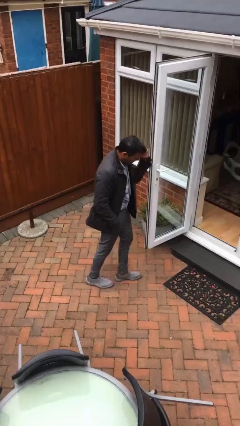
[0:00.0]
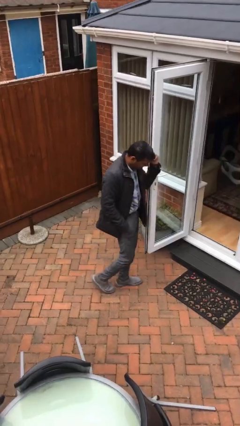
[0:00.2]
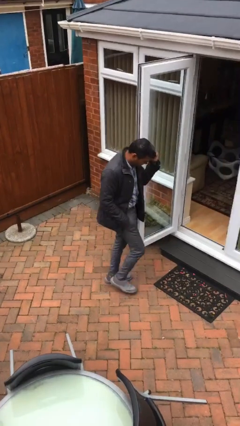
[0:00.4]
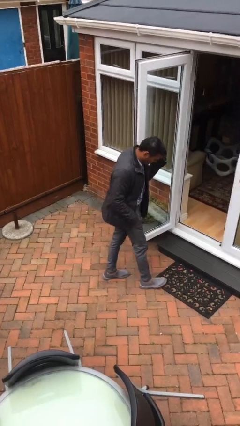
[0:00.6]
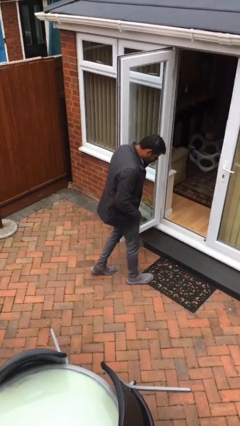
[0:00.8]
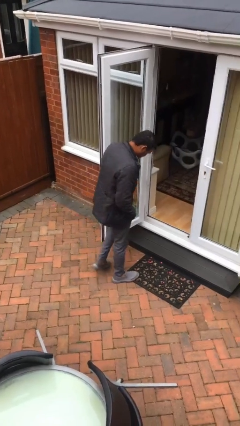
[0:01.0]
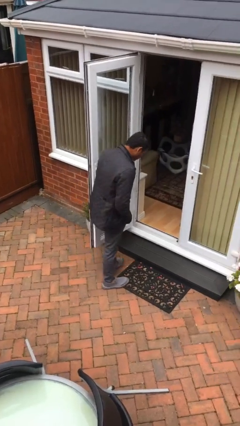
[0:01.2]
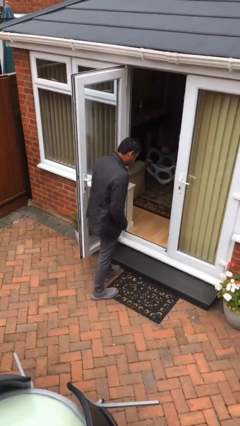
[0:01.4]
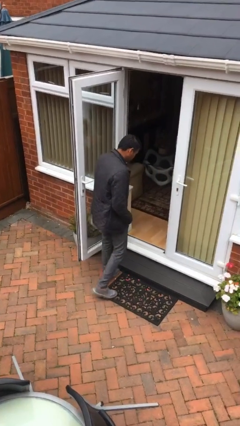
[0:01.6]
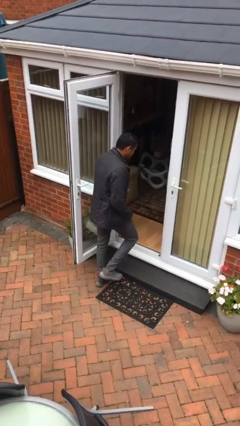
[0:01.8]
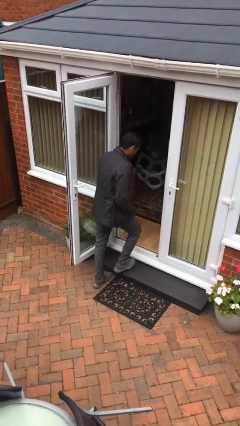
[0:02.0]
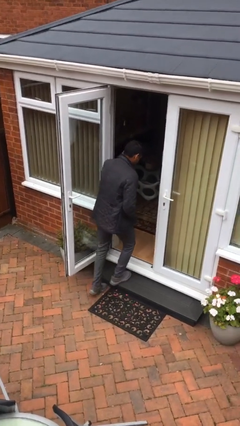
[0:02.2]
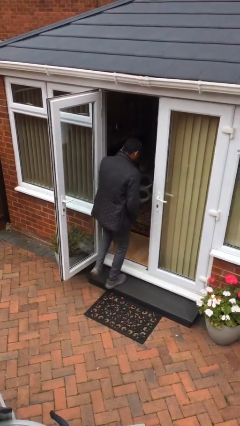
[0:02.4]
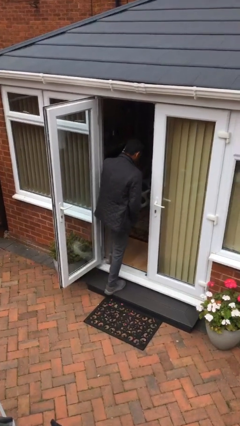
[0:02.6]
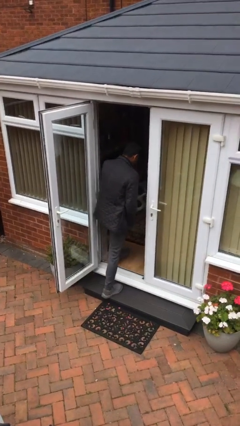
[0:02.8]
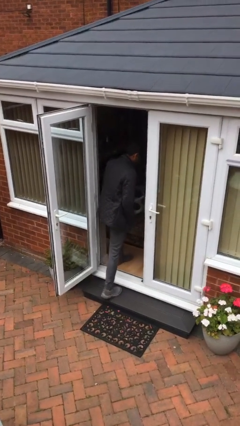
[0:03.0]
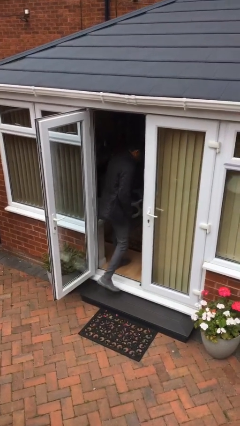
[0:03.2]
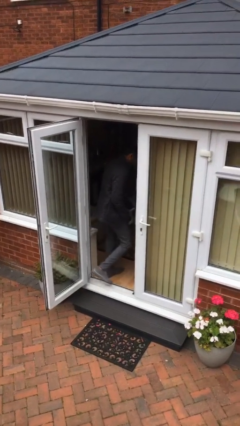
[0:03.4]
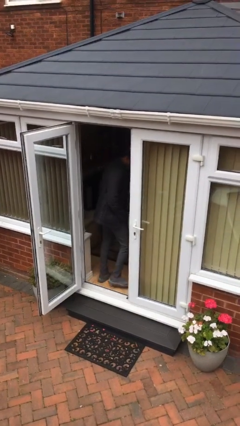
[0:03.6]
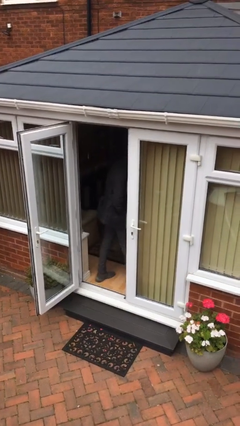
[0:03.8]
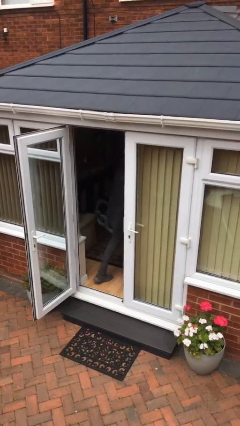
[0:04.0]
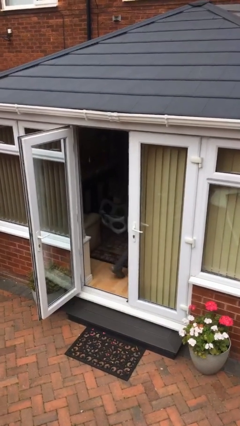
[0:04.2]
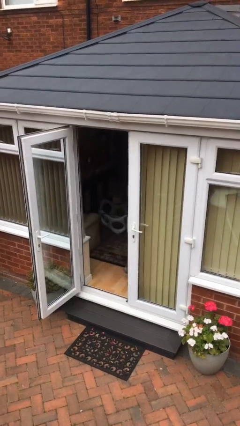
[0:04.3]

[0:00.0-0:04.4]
person exits scene through structure

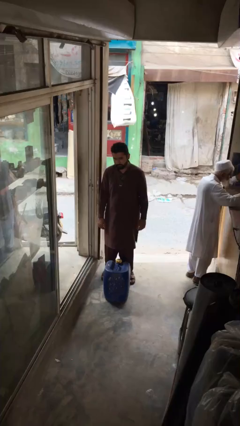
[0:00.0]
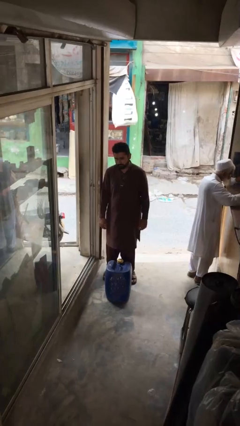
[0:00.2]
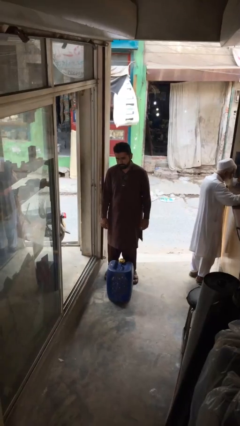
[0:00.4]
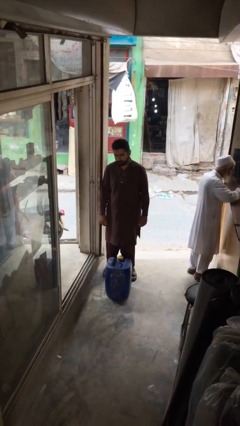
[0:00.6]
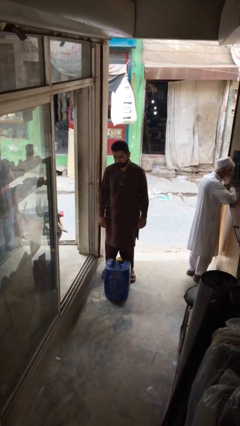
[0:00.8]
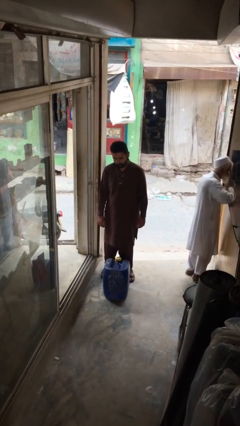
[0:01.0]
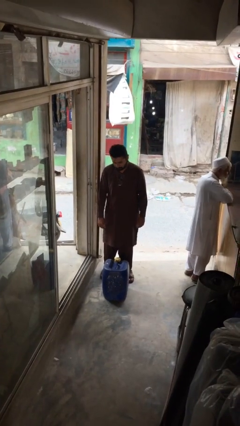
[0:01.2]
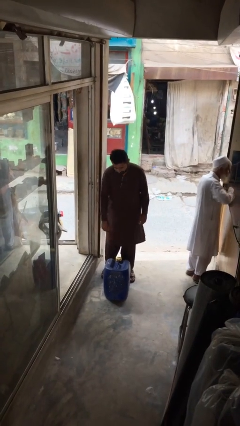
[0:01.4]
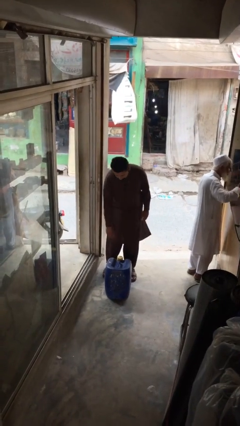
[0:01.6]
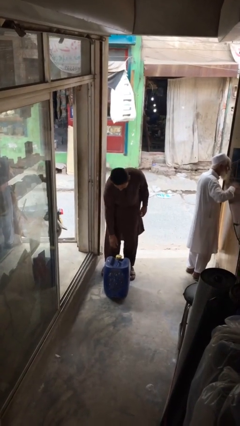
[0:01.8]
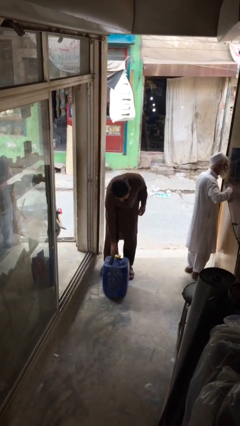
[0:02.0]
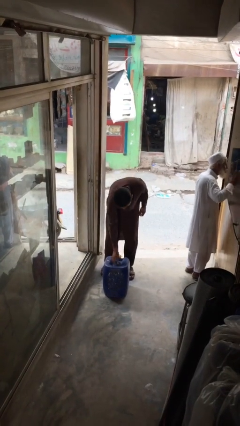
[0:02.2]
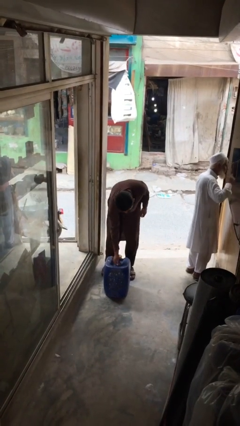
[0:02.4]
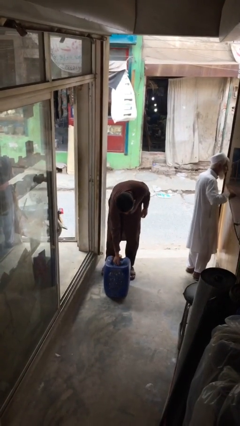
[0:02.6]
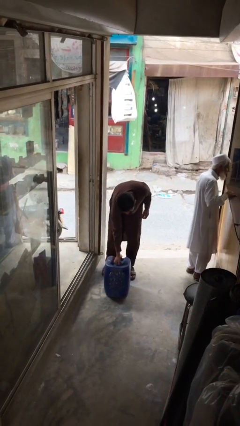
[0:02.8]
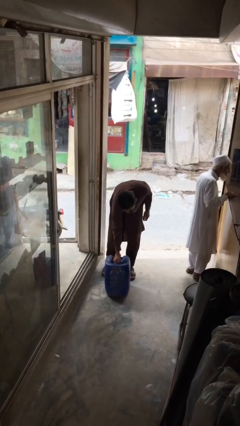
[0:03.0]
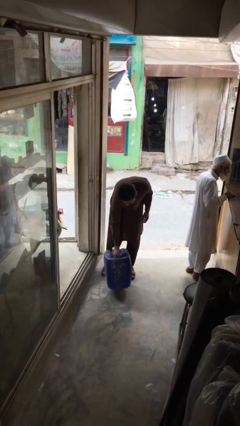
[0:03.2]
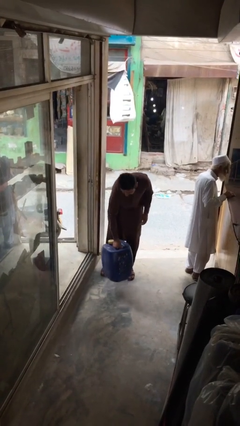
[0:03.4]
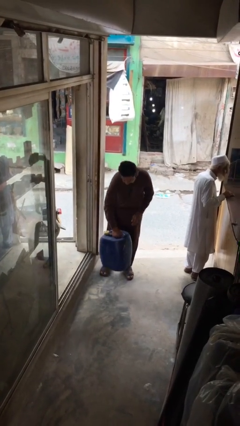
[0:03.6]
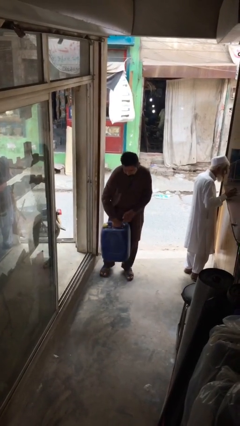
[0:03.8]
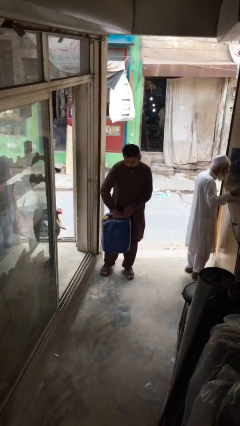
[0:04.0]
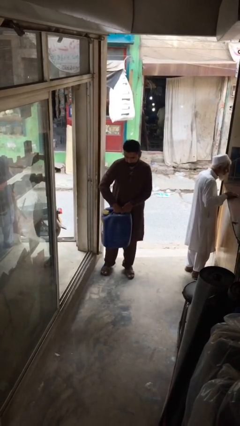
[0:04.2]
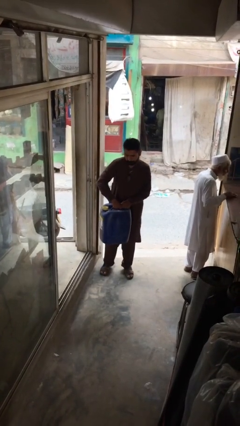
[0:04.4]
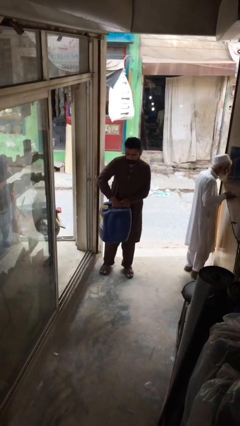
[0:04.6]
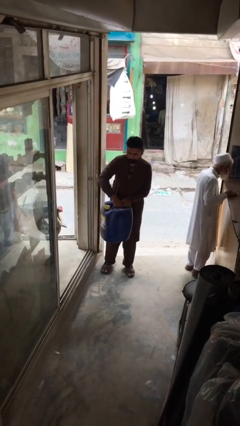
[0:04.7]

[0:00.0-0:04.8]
person picks up object from floor

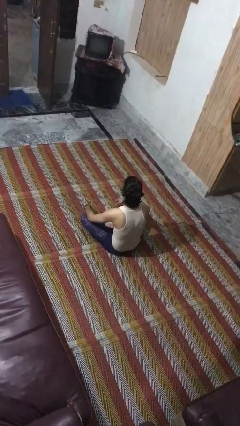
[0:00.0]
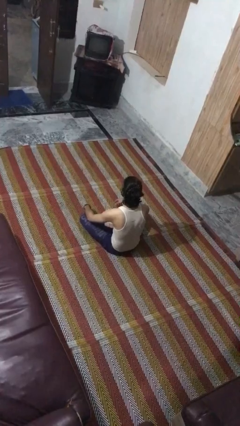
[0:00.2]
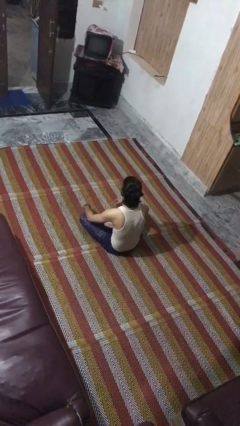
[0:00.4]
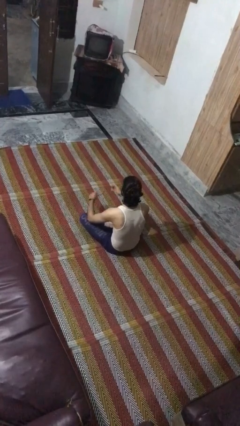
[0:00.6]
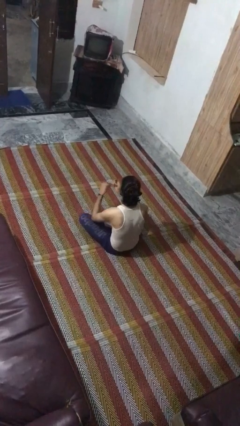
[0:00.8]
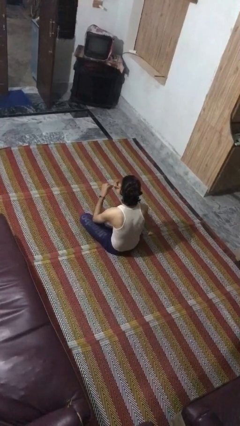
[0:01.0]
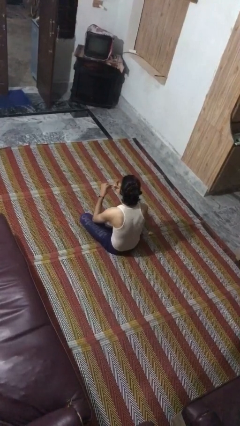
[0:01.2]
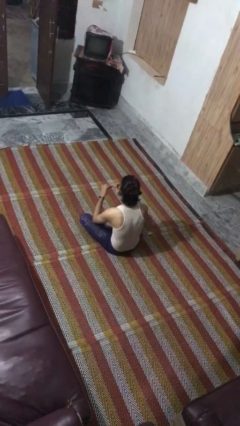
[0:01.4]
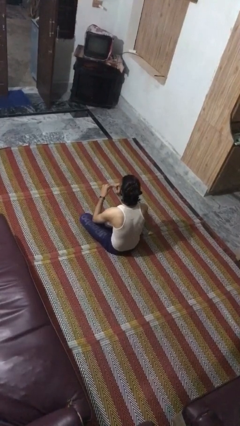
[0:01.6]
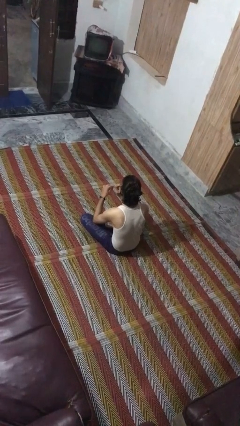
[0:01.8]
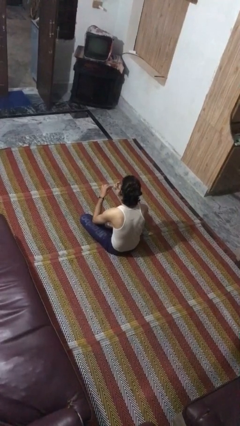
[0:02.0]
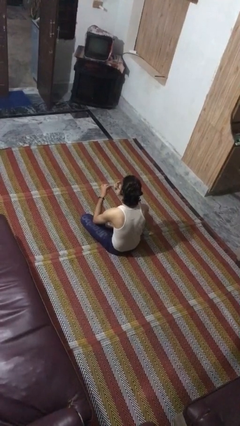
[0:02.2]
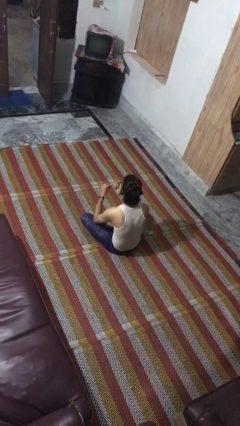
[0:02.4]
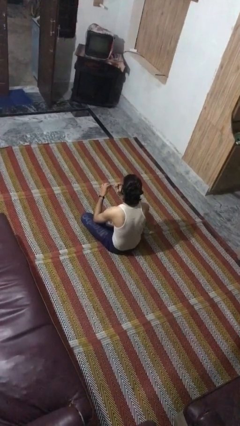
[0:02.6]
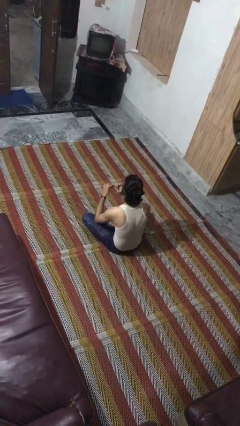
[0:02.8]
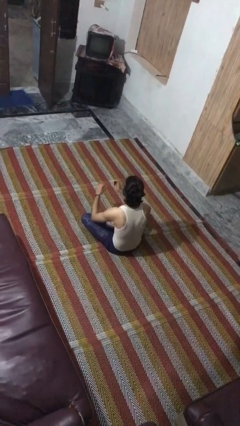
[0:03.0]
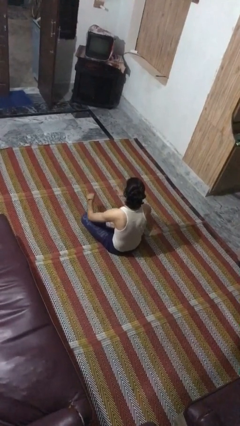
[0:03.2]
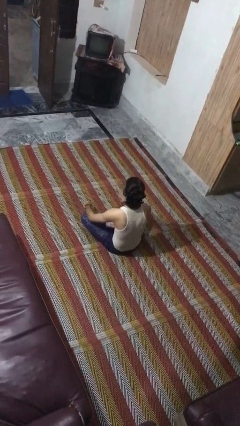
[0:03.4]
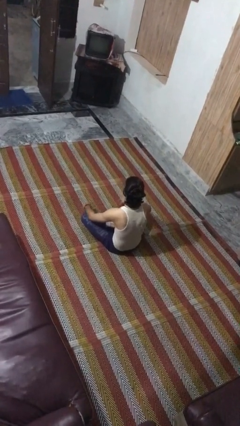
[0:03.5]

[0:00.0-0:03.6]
person files fingernails

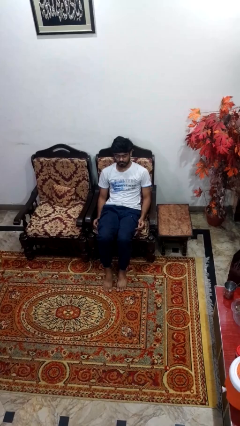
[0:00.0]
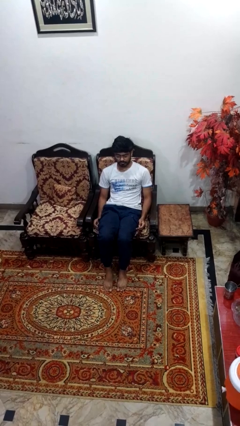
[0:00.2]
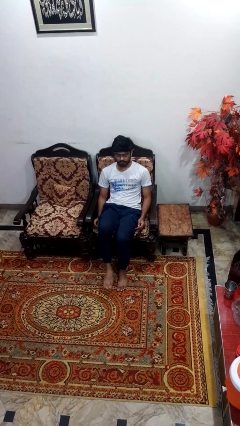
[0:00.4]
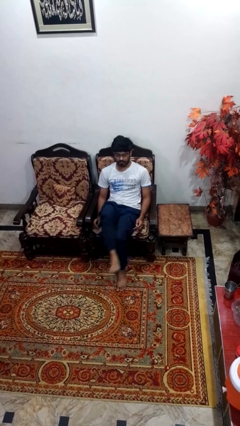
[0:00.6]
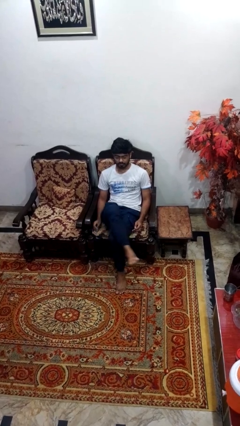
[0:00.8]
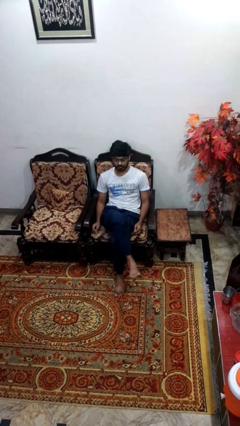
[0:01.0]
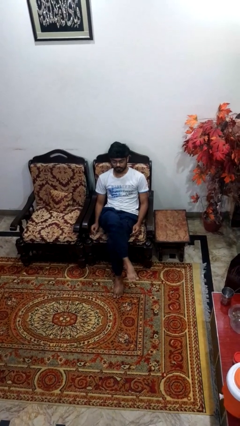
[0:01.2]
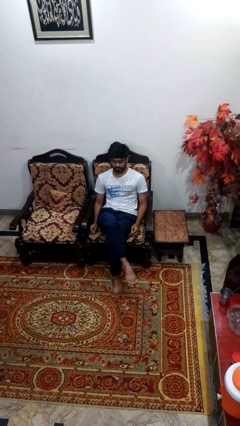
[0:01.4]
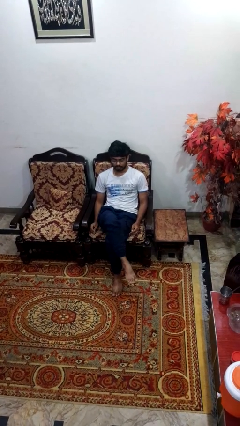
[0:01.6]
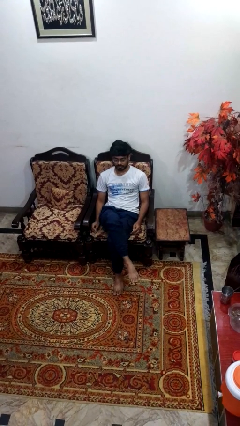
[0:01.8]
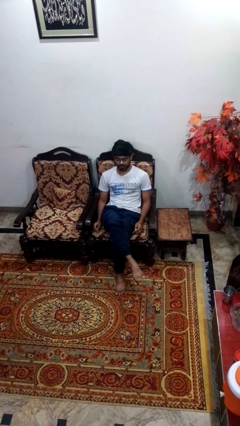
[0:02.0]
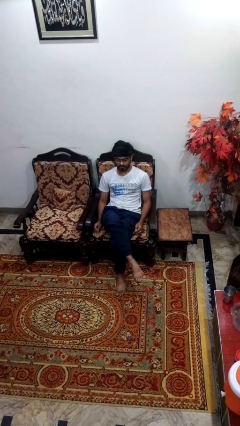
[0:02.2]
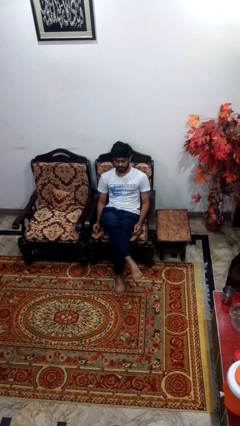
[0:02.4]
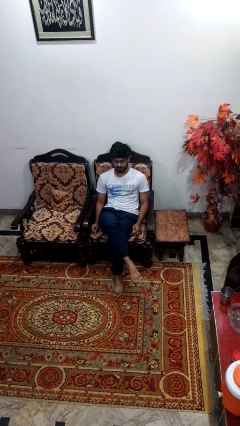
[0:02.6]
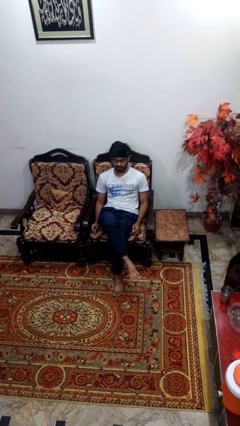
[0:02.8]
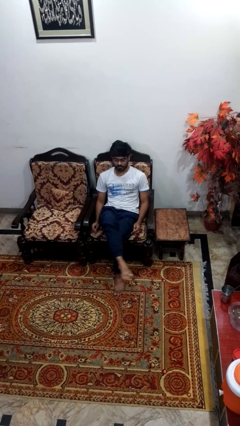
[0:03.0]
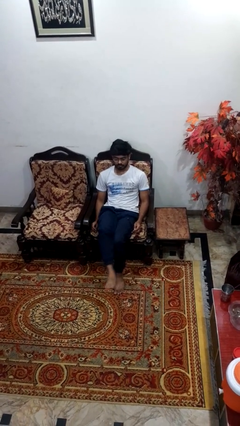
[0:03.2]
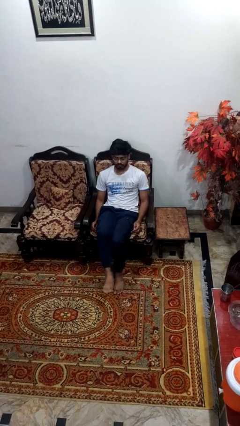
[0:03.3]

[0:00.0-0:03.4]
person crosses legs

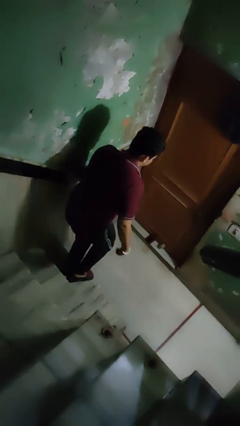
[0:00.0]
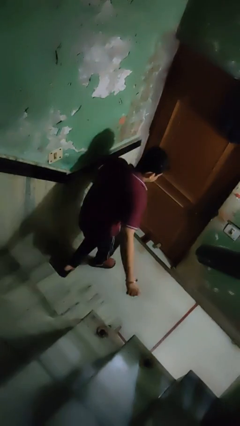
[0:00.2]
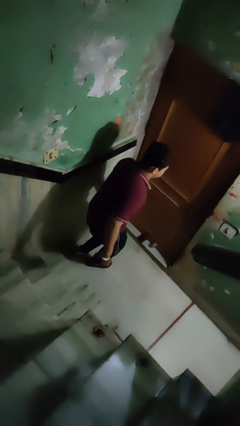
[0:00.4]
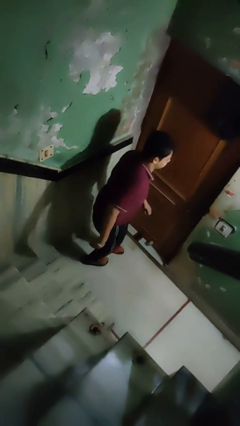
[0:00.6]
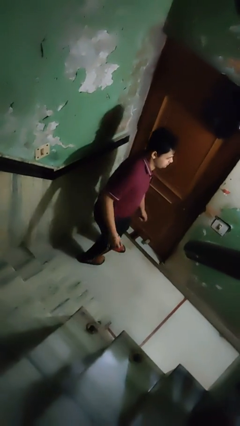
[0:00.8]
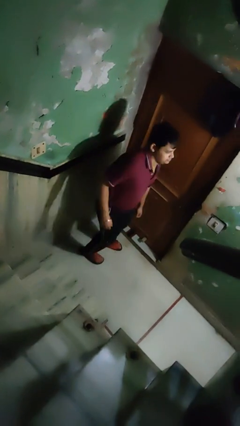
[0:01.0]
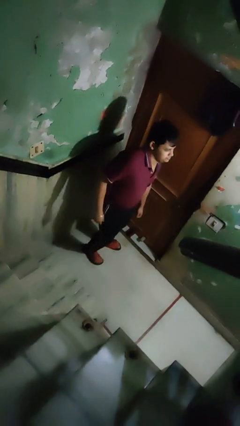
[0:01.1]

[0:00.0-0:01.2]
person trips on stair

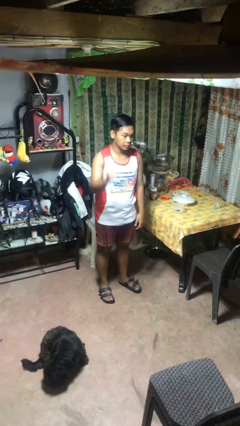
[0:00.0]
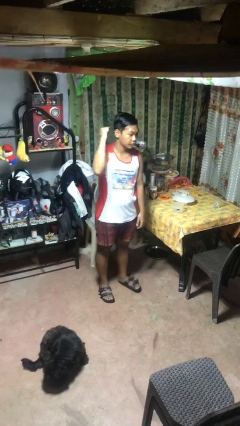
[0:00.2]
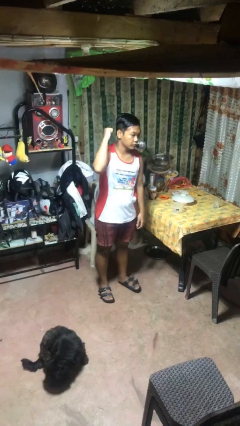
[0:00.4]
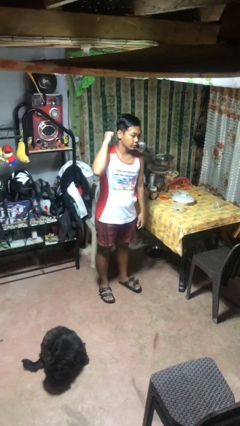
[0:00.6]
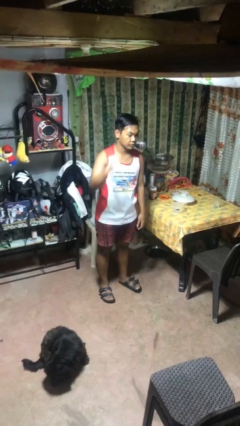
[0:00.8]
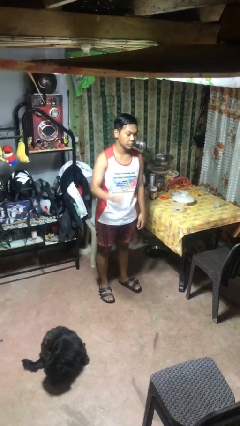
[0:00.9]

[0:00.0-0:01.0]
person gestures behind me
